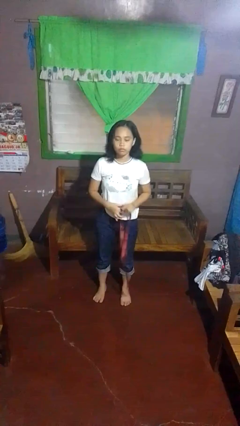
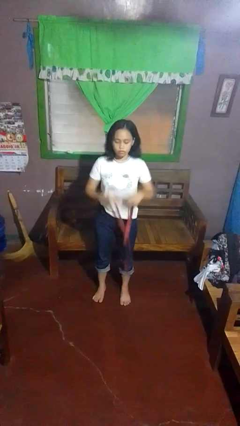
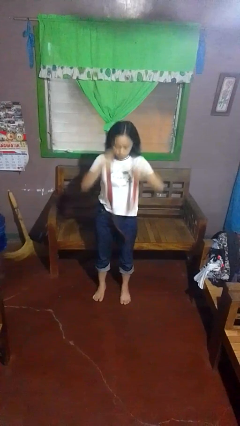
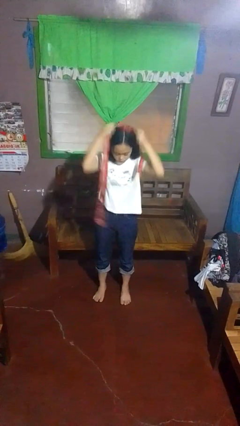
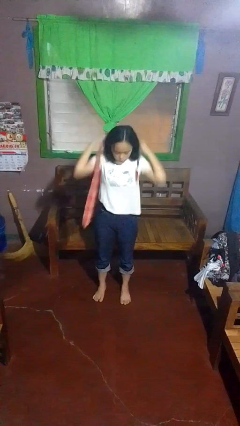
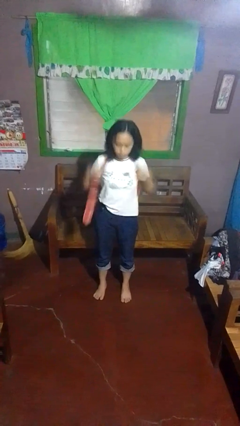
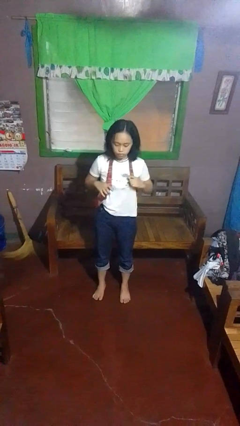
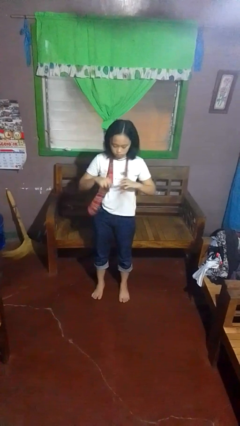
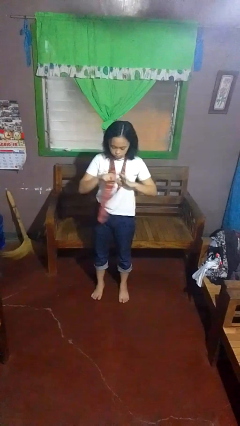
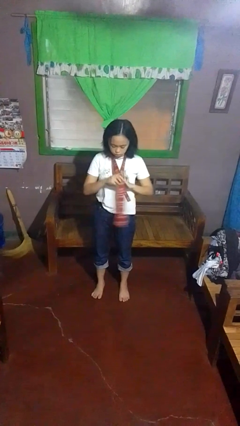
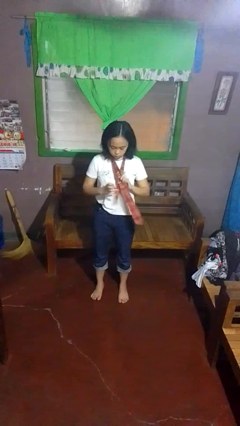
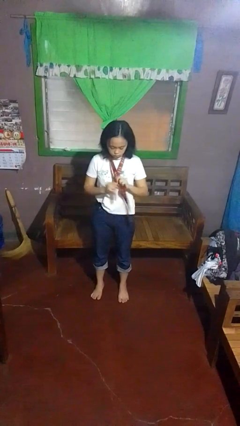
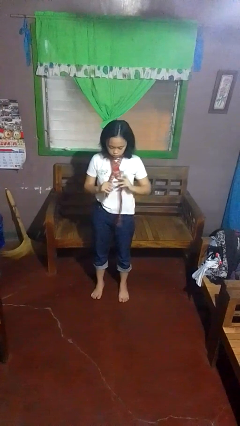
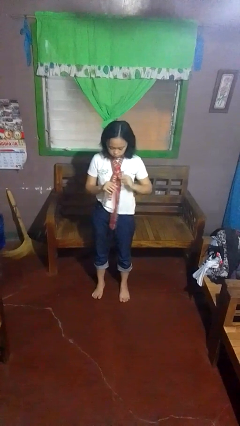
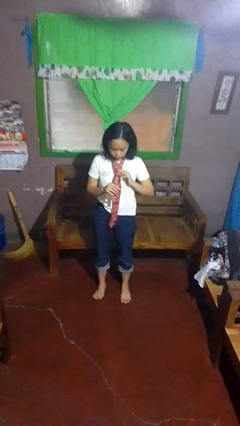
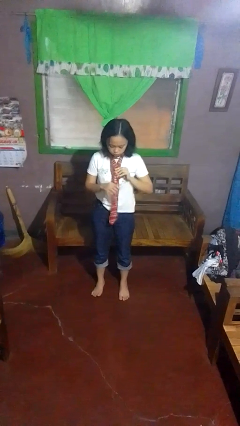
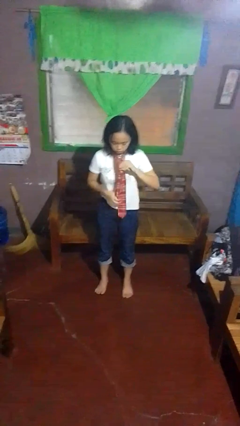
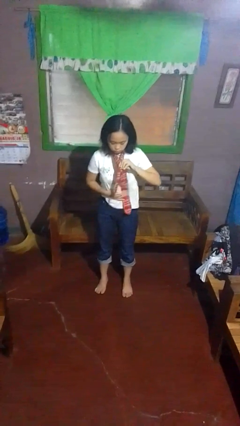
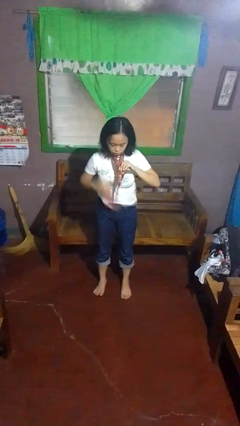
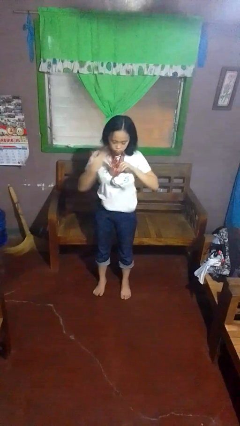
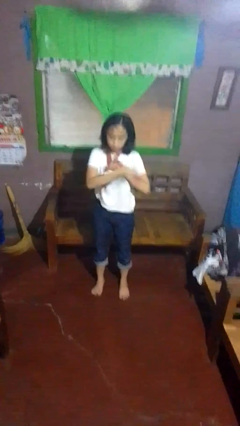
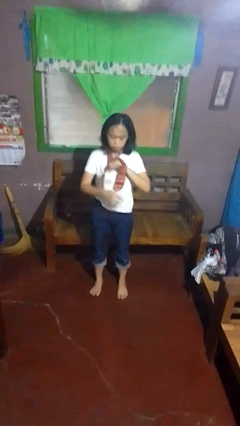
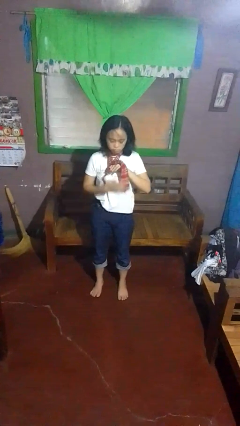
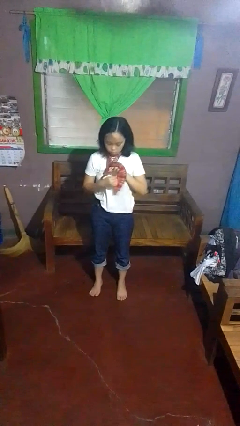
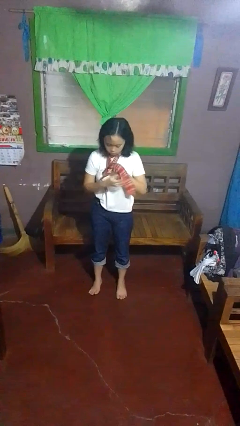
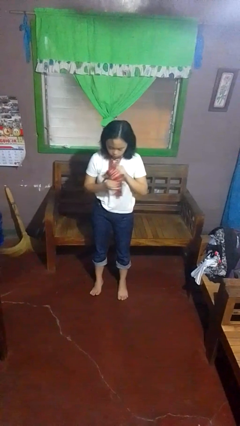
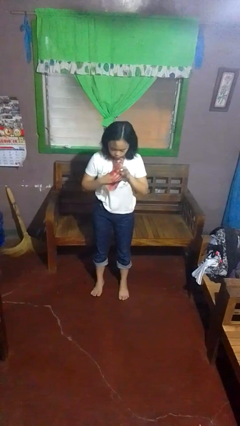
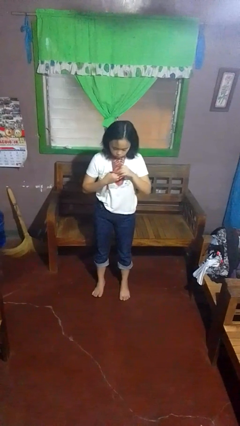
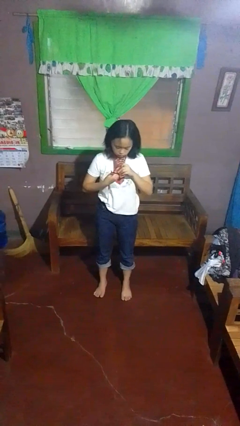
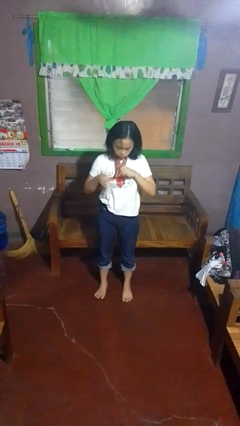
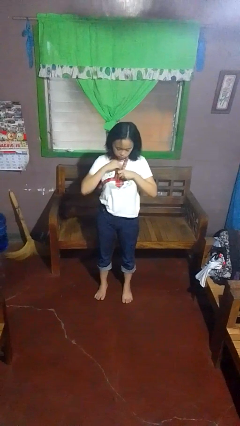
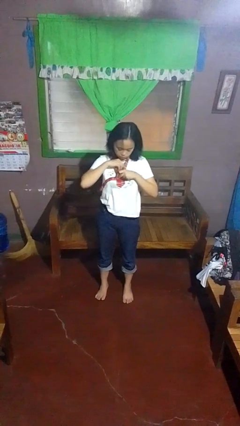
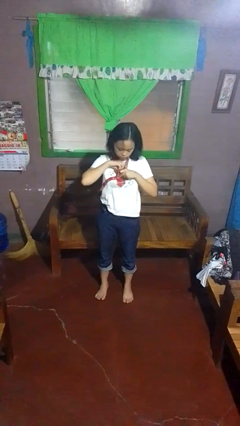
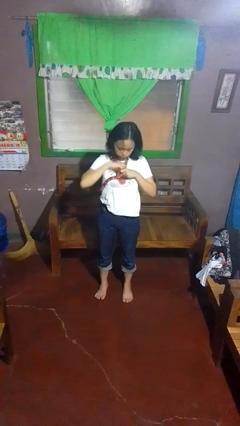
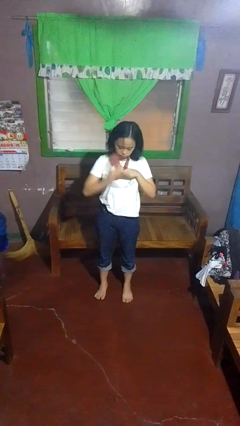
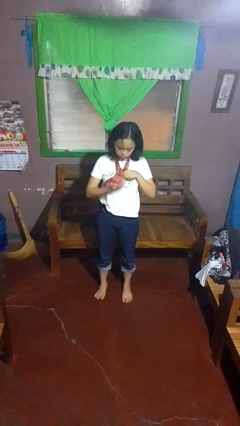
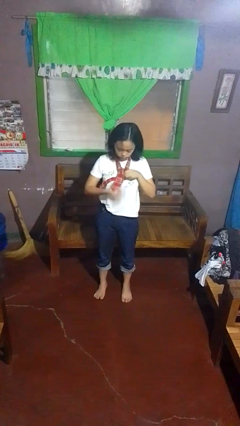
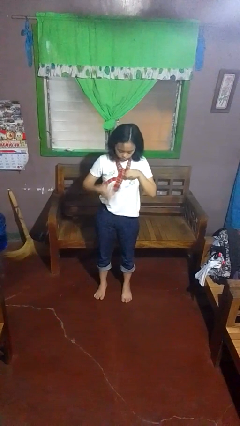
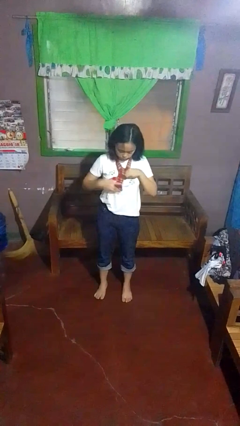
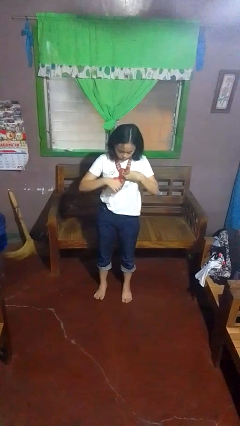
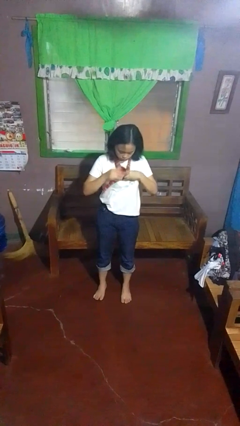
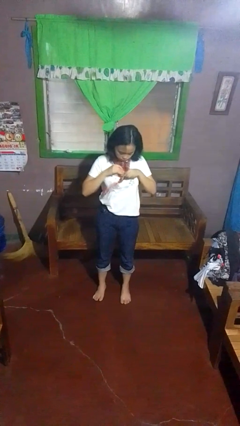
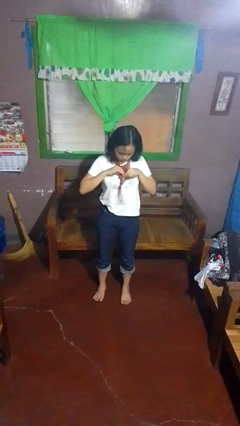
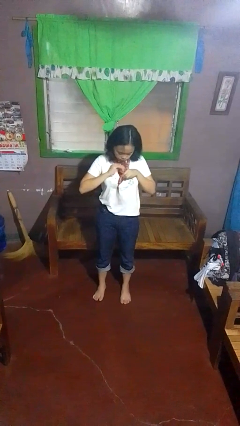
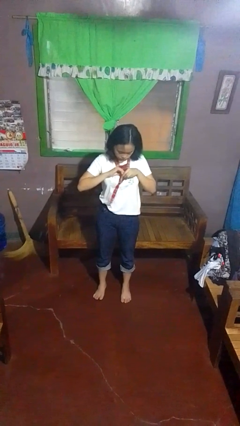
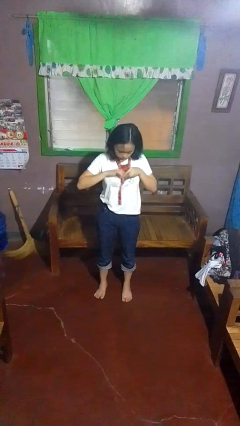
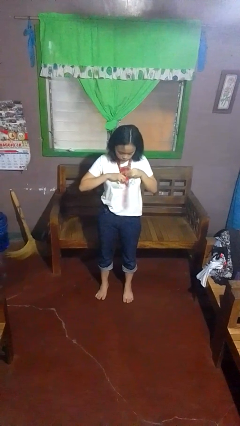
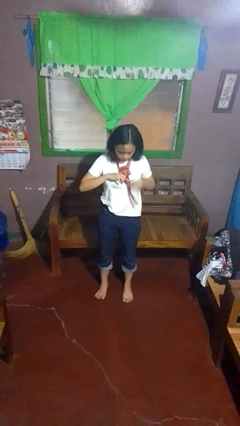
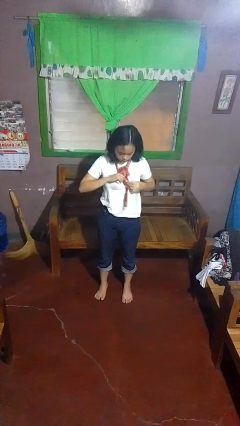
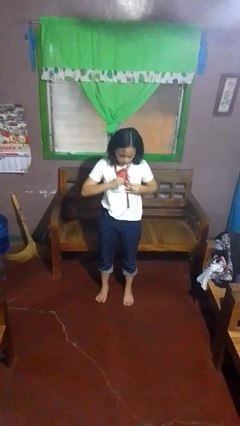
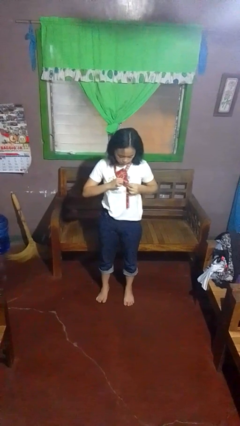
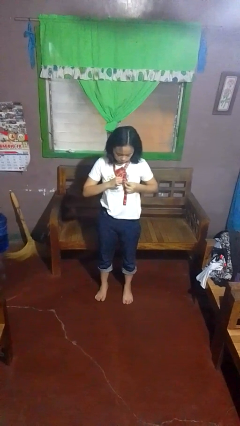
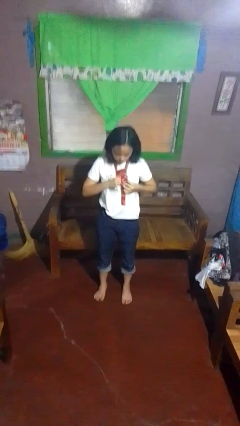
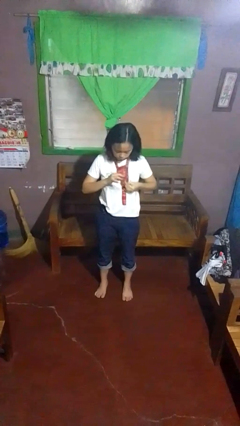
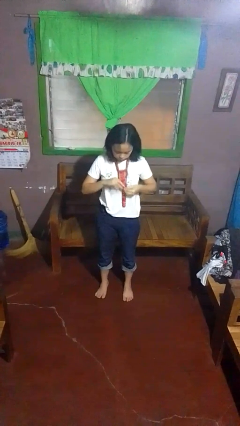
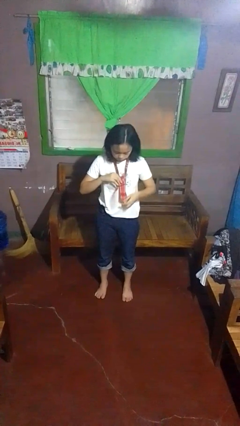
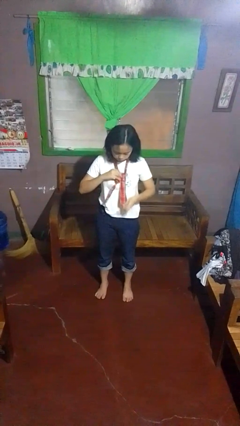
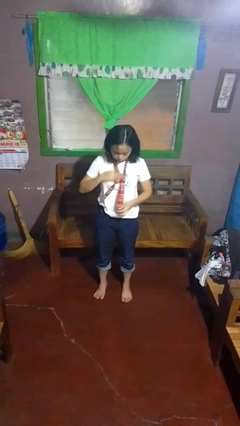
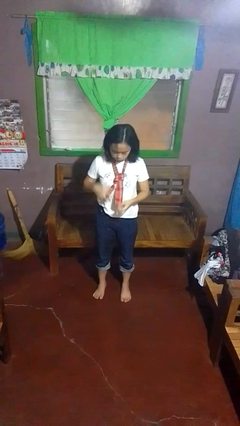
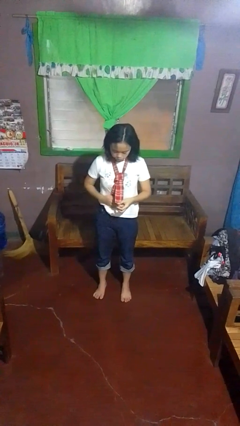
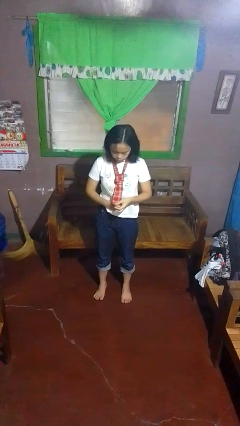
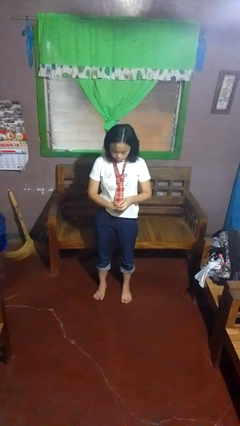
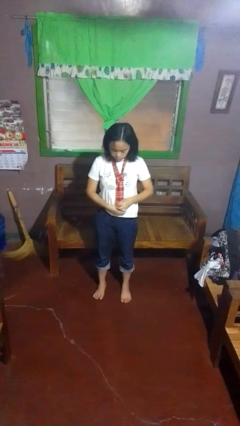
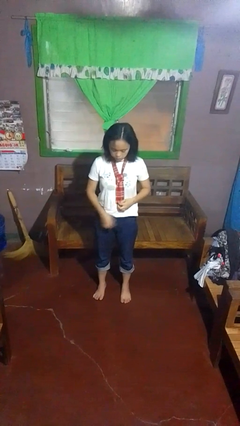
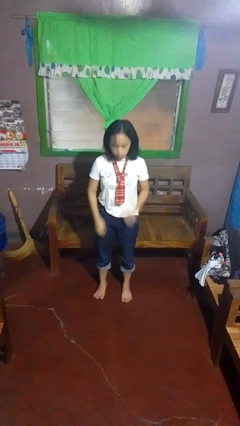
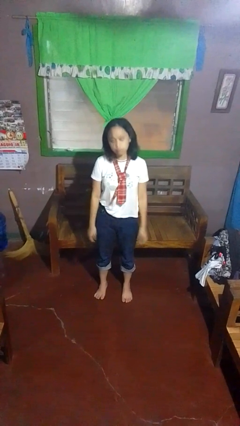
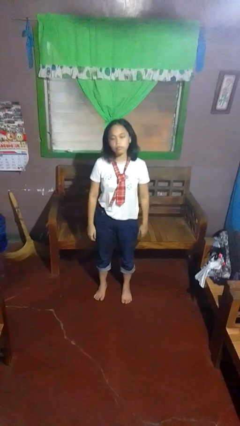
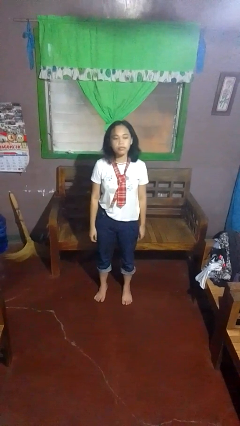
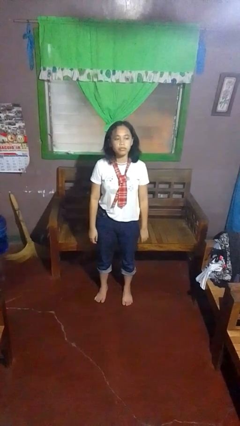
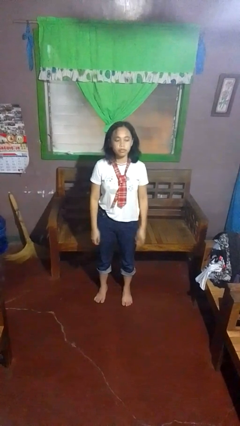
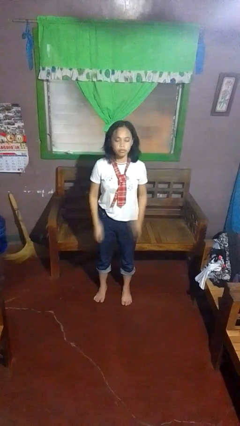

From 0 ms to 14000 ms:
person puts on necktie

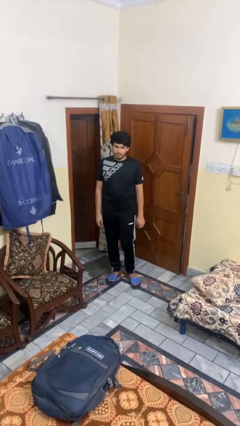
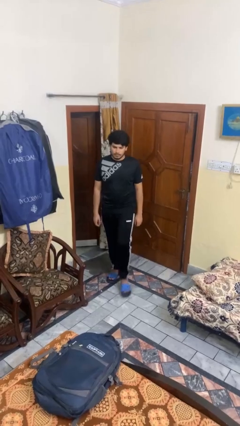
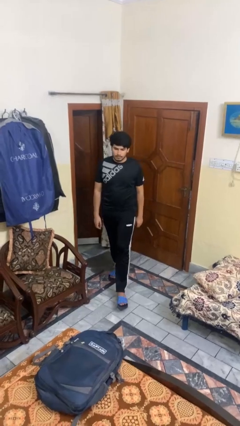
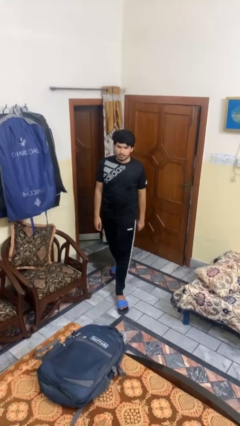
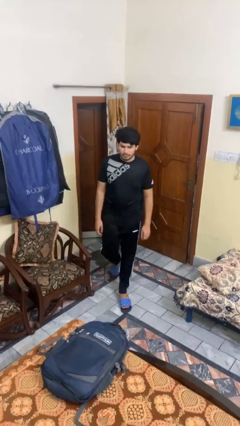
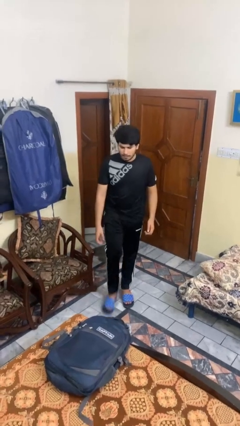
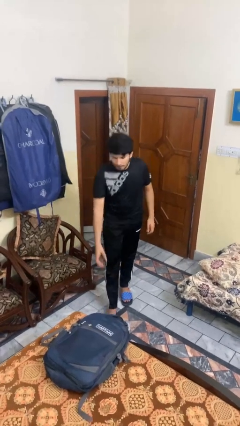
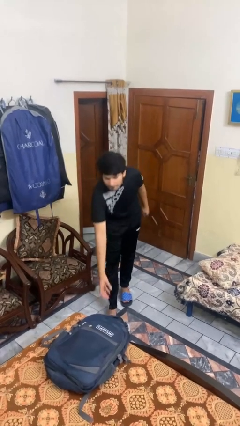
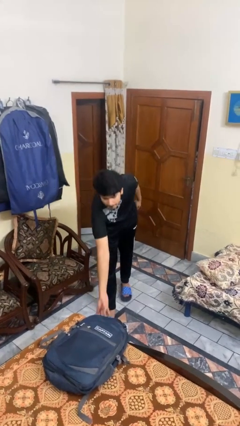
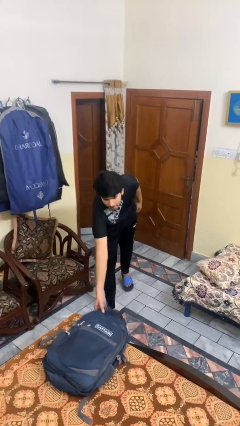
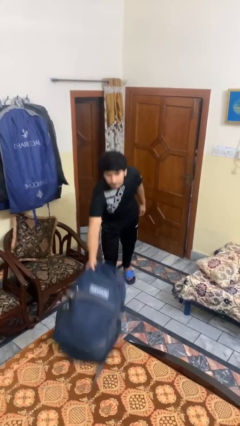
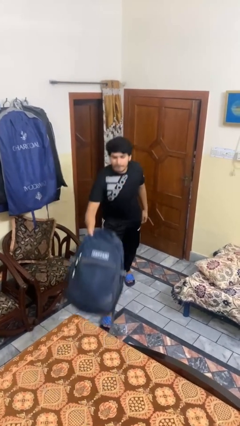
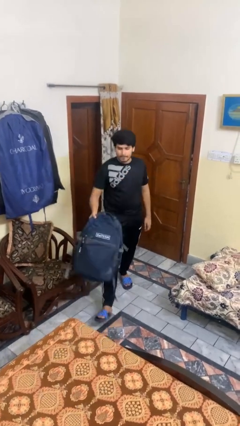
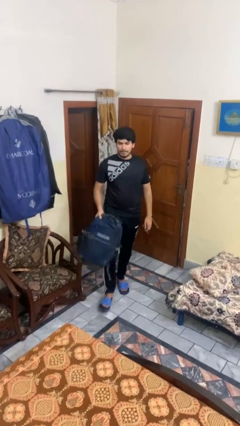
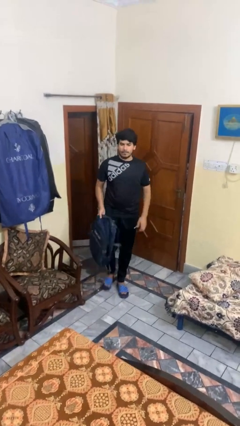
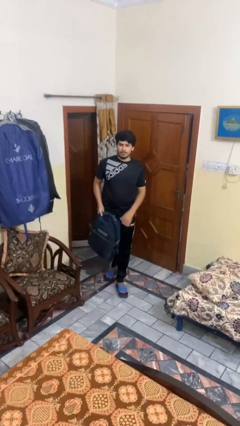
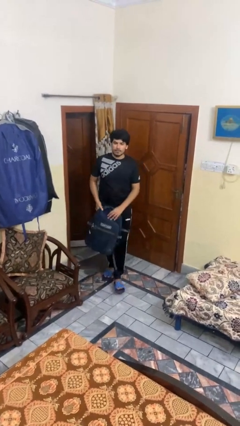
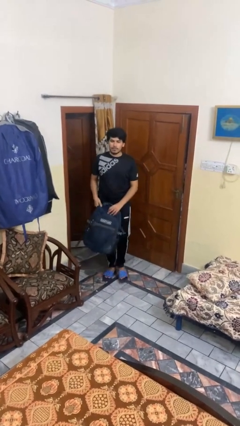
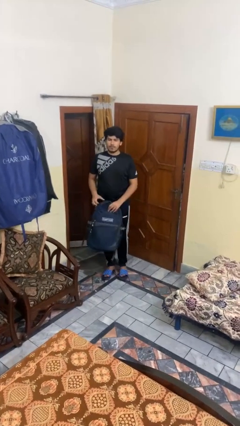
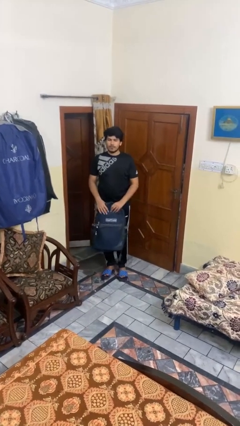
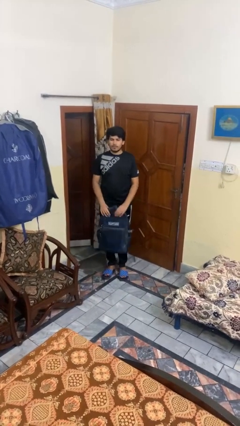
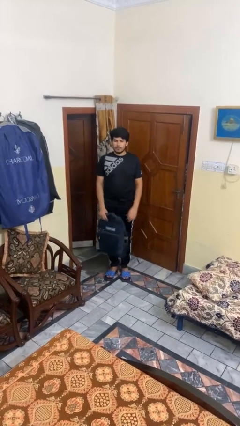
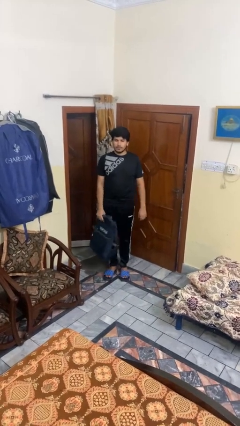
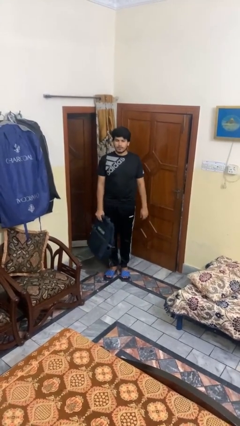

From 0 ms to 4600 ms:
person picks up object from bed
